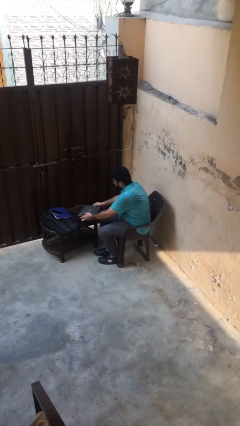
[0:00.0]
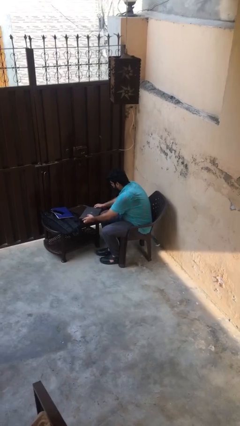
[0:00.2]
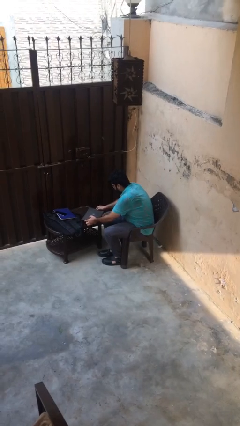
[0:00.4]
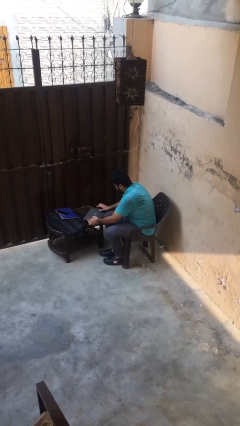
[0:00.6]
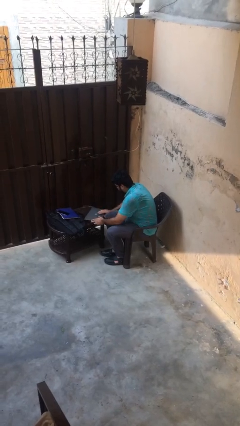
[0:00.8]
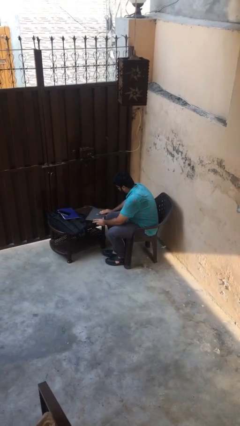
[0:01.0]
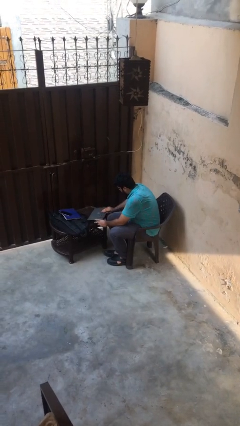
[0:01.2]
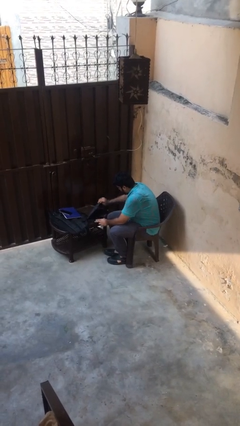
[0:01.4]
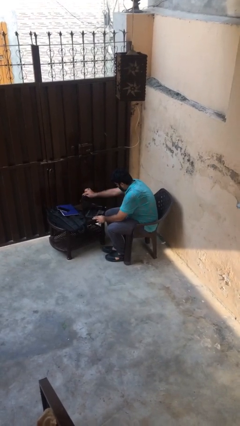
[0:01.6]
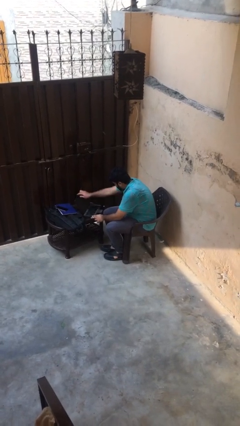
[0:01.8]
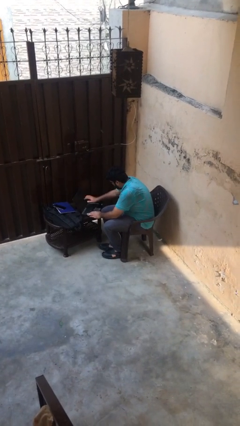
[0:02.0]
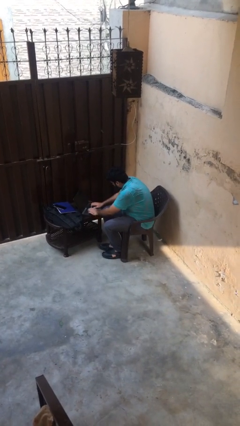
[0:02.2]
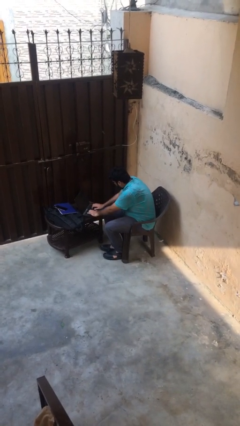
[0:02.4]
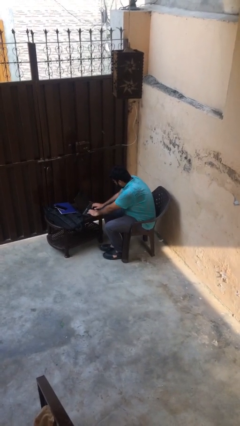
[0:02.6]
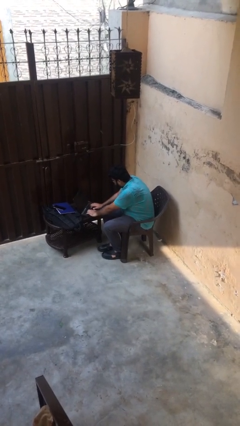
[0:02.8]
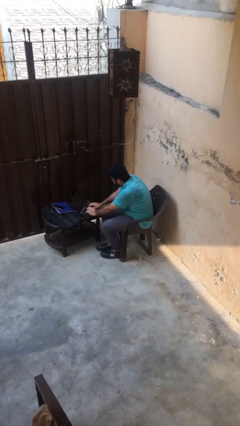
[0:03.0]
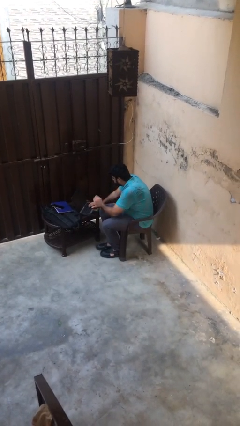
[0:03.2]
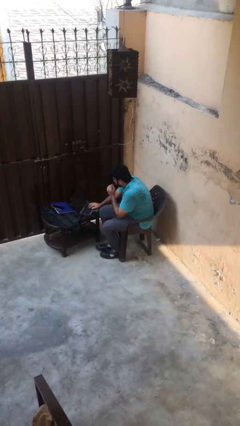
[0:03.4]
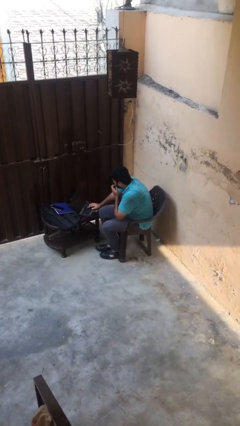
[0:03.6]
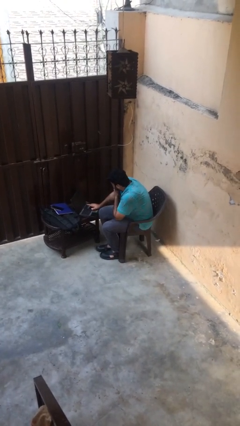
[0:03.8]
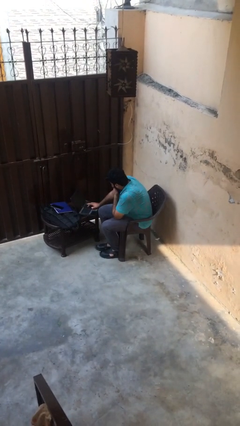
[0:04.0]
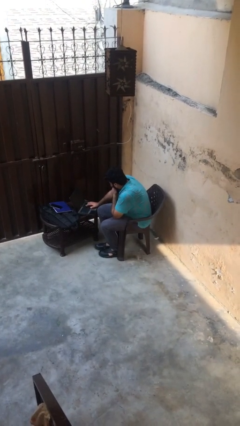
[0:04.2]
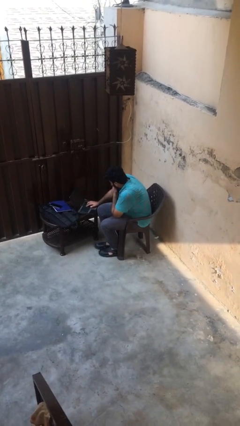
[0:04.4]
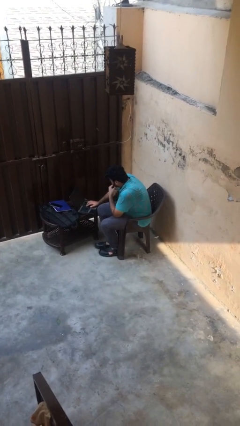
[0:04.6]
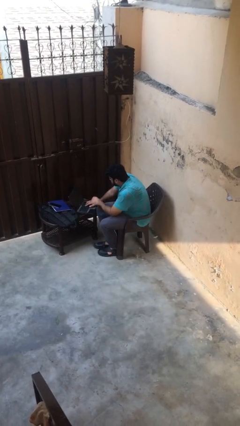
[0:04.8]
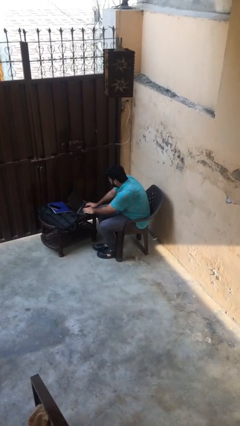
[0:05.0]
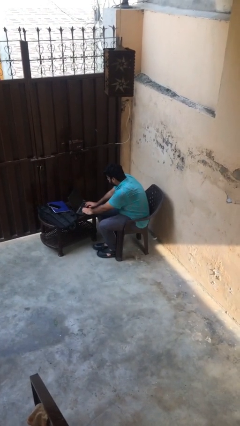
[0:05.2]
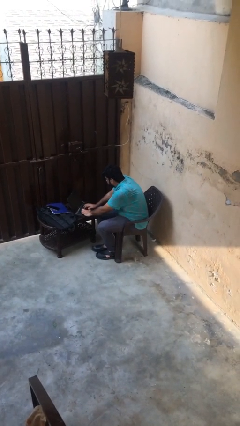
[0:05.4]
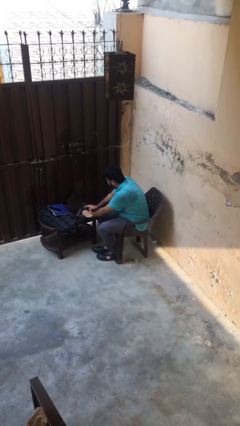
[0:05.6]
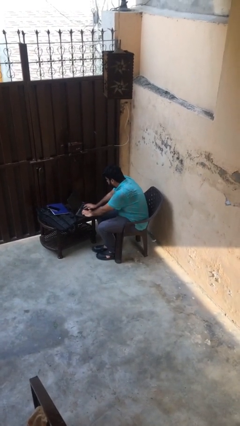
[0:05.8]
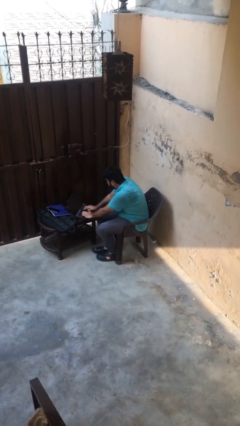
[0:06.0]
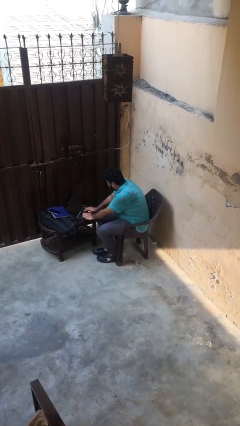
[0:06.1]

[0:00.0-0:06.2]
person interacts with laptop

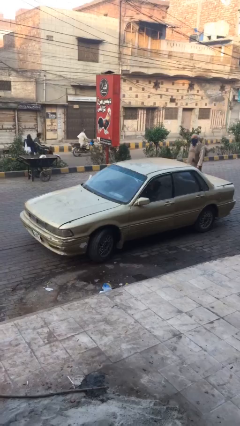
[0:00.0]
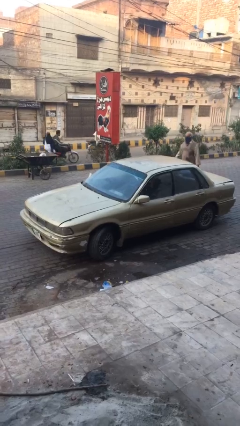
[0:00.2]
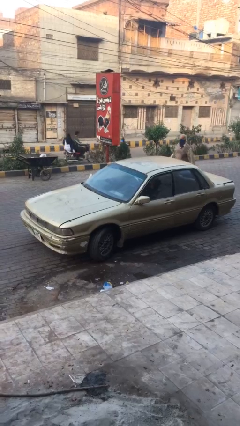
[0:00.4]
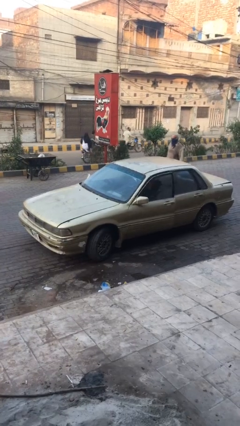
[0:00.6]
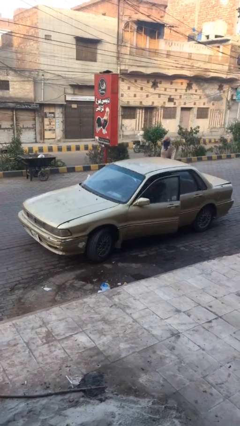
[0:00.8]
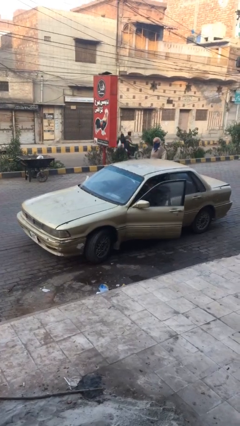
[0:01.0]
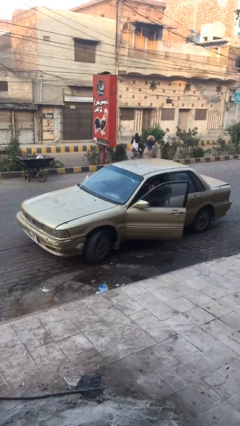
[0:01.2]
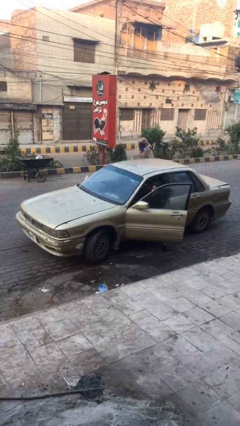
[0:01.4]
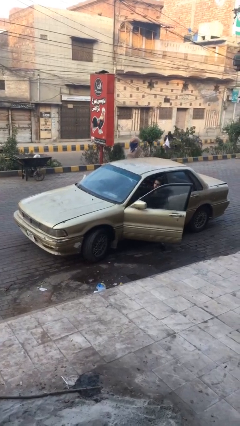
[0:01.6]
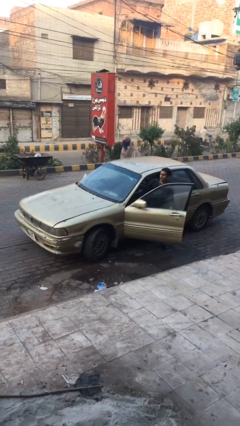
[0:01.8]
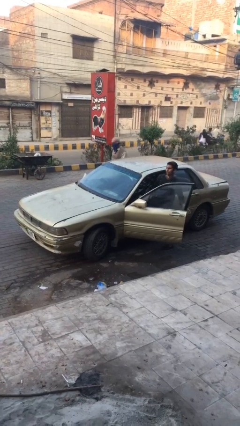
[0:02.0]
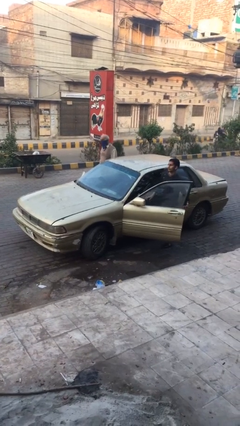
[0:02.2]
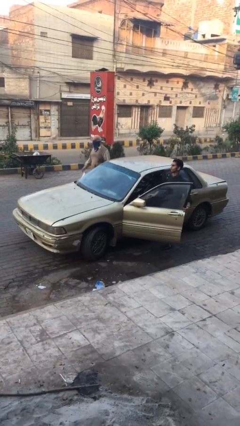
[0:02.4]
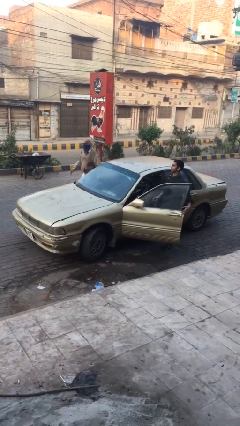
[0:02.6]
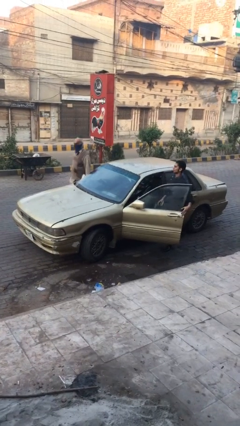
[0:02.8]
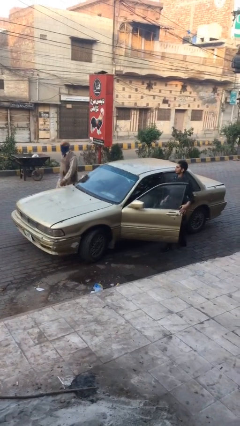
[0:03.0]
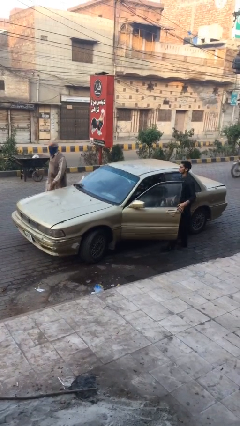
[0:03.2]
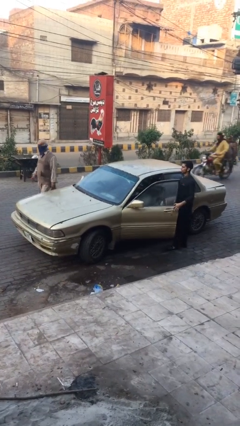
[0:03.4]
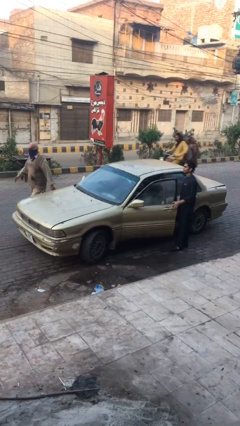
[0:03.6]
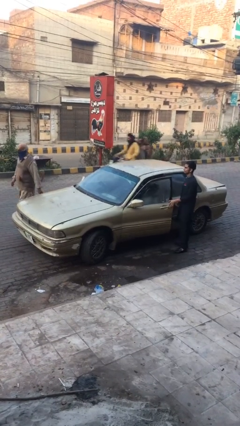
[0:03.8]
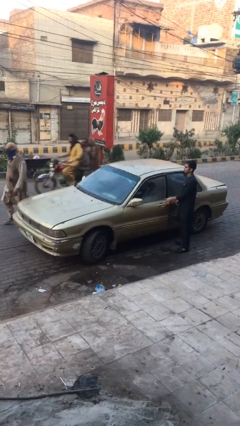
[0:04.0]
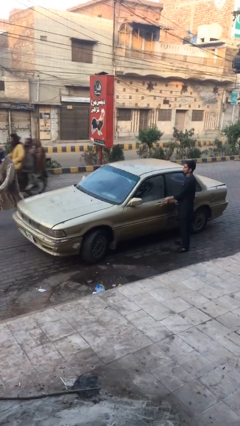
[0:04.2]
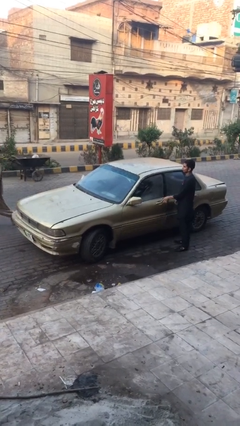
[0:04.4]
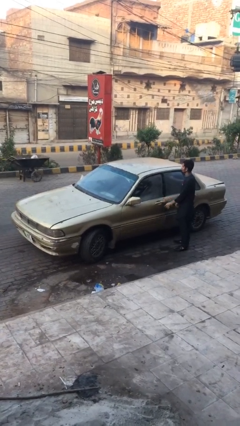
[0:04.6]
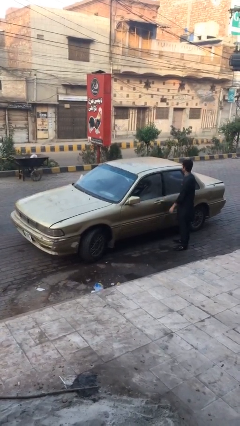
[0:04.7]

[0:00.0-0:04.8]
car drops off person

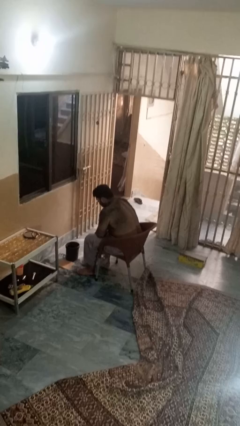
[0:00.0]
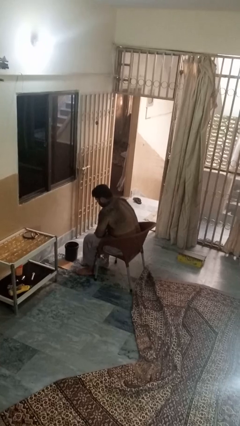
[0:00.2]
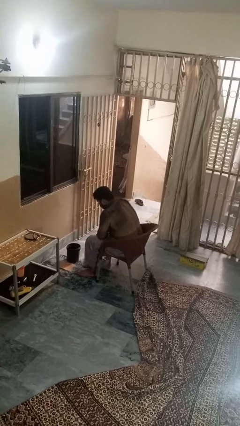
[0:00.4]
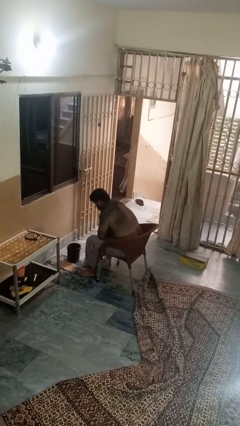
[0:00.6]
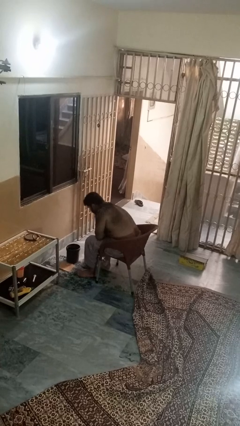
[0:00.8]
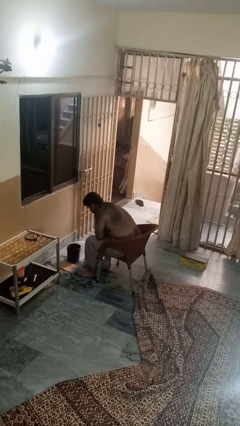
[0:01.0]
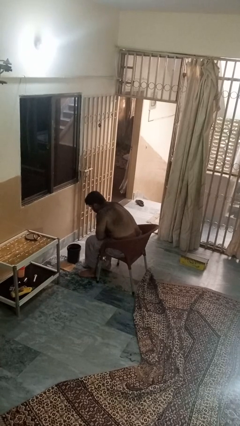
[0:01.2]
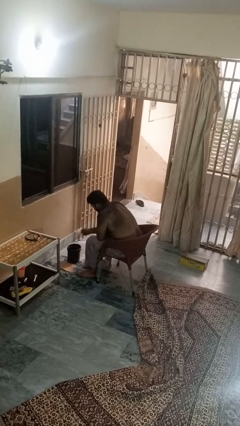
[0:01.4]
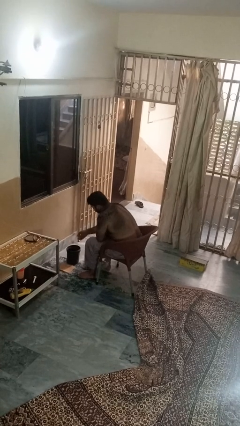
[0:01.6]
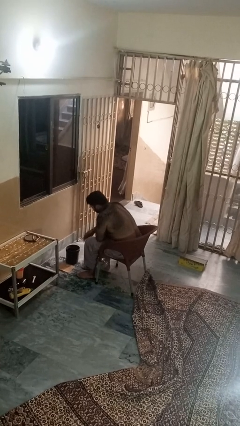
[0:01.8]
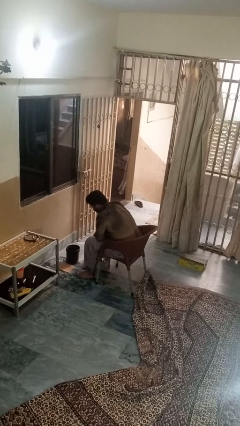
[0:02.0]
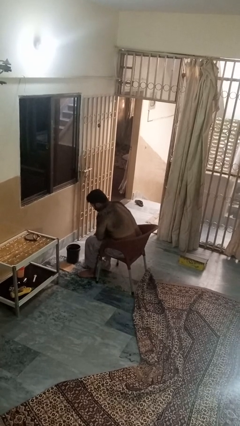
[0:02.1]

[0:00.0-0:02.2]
person discards trash

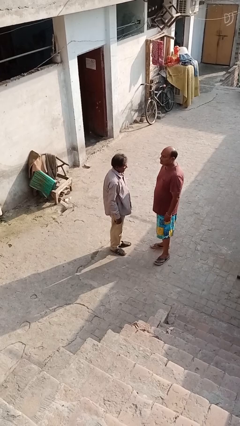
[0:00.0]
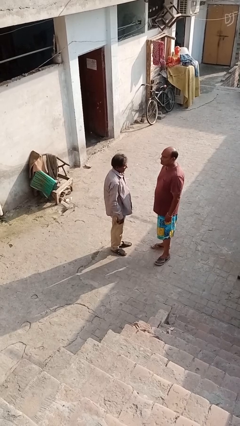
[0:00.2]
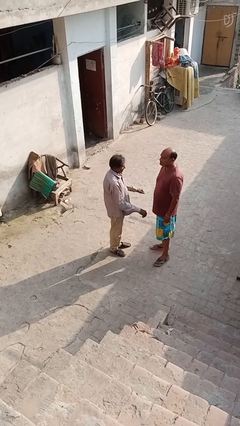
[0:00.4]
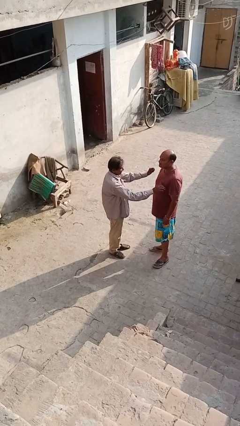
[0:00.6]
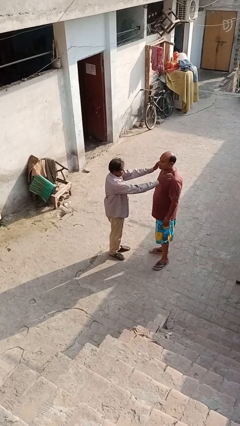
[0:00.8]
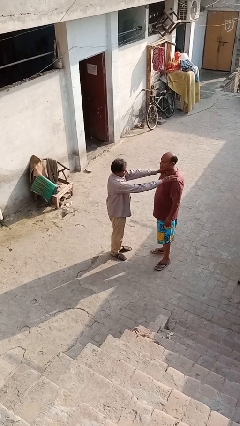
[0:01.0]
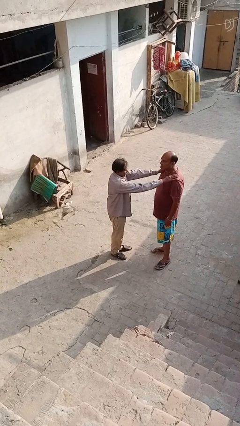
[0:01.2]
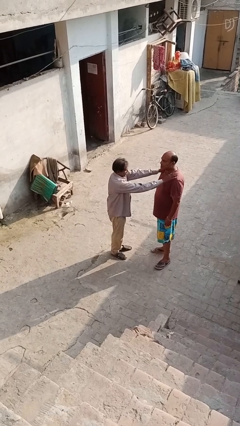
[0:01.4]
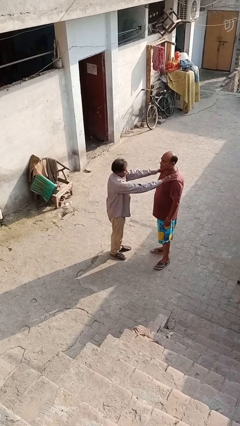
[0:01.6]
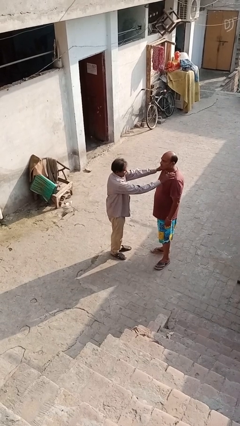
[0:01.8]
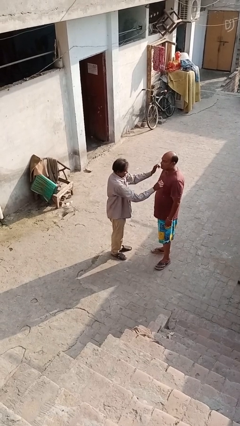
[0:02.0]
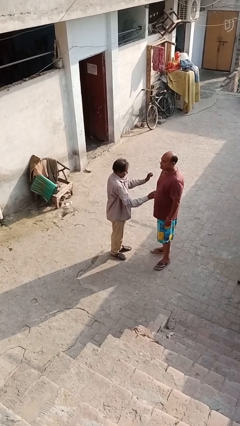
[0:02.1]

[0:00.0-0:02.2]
person pounds shoulders of person

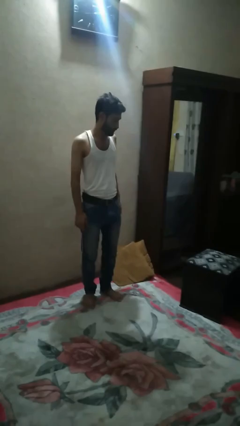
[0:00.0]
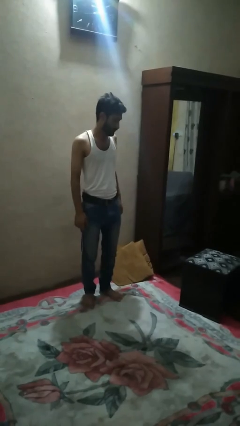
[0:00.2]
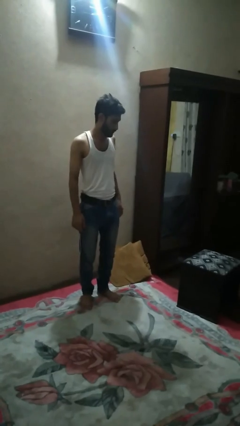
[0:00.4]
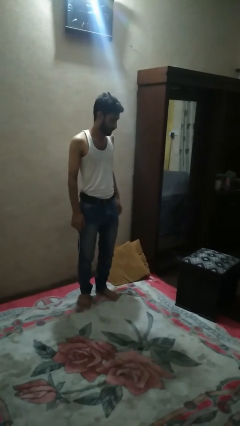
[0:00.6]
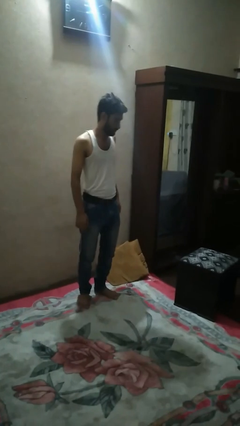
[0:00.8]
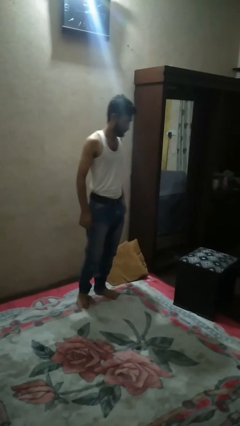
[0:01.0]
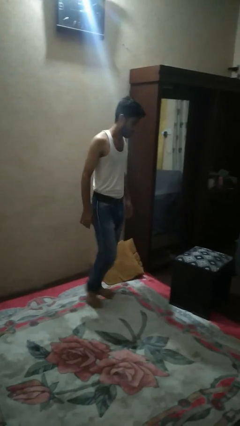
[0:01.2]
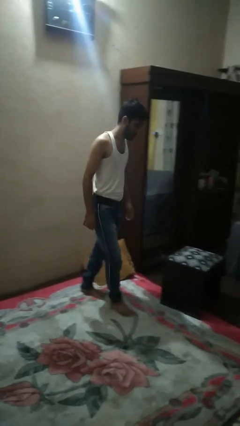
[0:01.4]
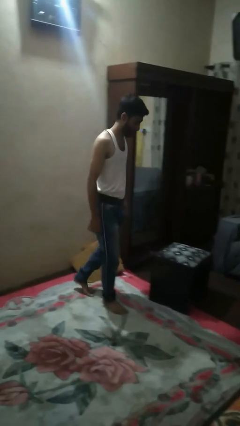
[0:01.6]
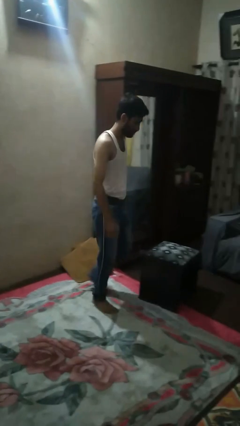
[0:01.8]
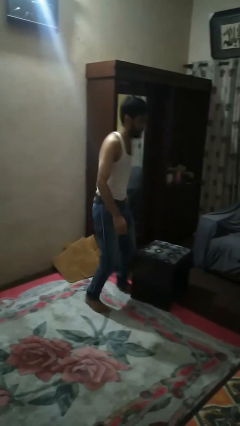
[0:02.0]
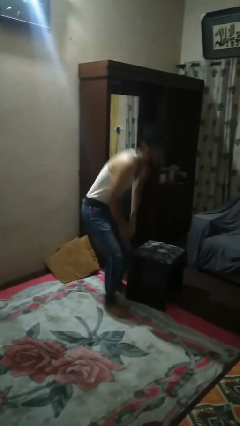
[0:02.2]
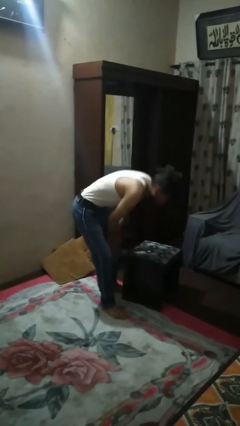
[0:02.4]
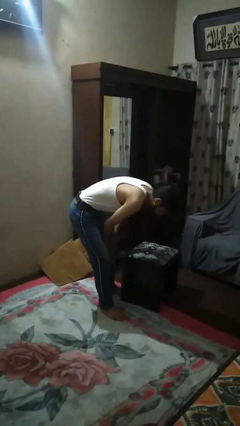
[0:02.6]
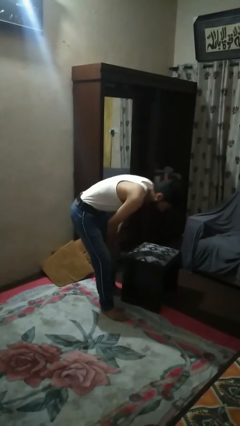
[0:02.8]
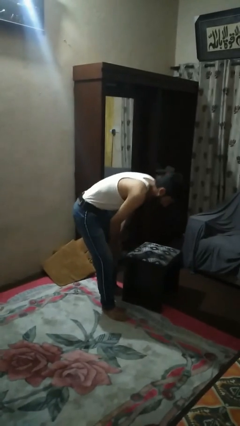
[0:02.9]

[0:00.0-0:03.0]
person bumps into table
